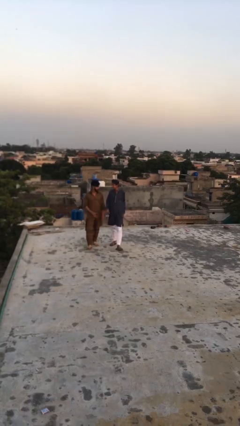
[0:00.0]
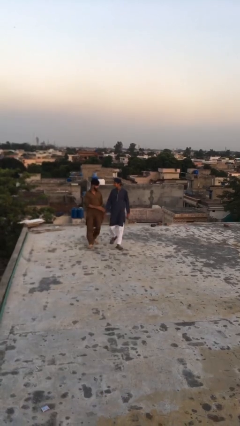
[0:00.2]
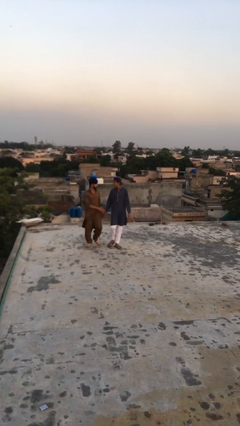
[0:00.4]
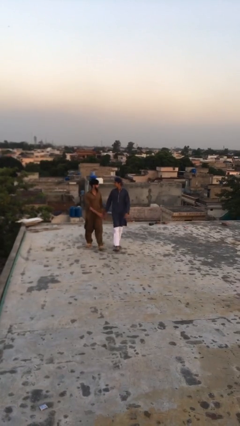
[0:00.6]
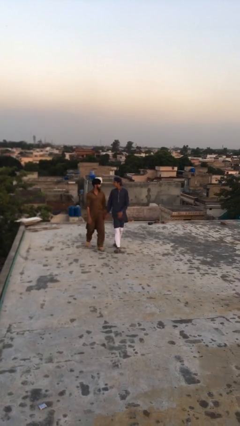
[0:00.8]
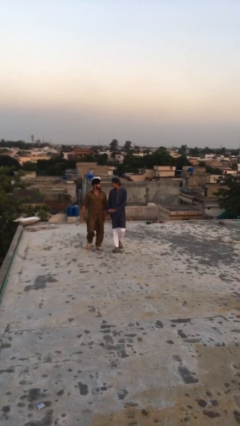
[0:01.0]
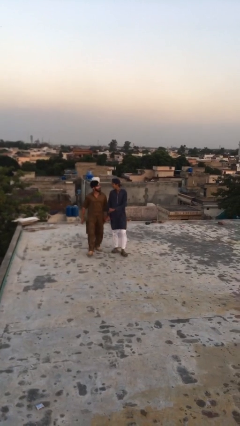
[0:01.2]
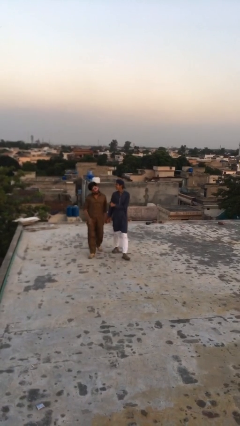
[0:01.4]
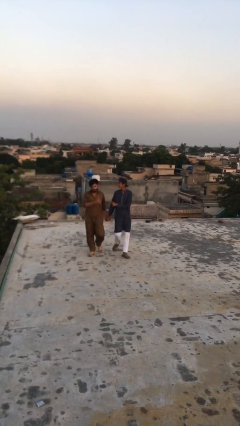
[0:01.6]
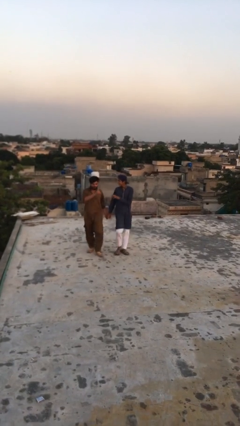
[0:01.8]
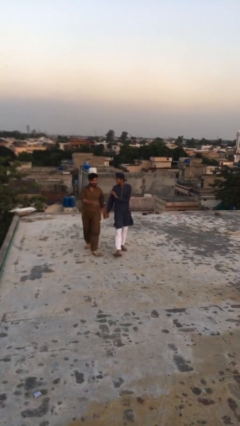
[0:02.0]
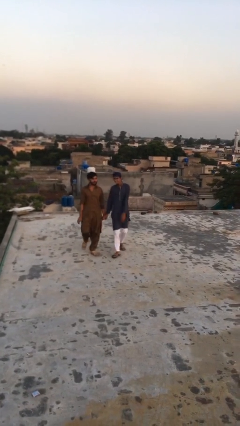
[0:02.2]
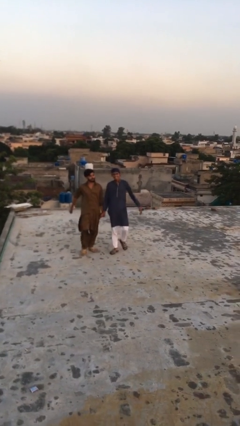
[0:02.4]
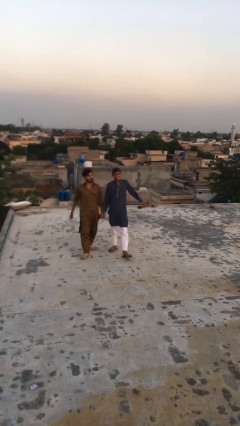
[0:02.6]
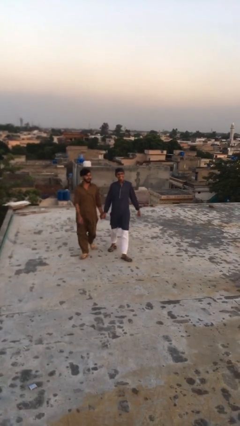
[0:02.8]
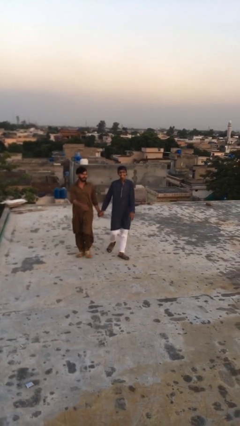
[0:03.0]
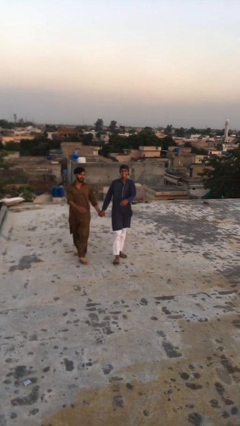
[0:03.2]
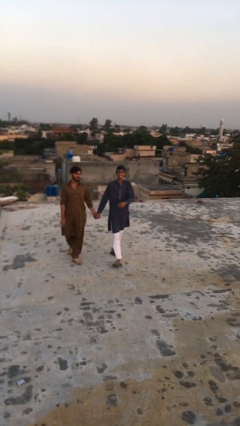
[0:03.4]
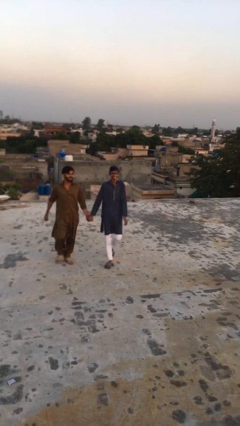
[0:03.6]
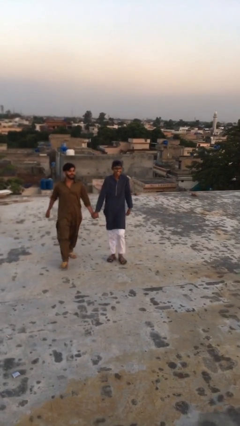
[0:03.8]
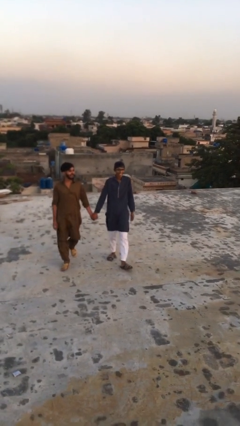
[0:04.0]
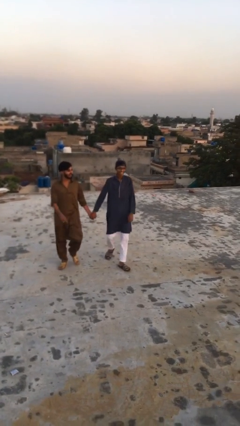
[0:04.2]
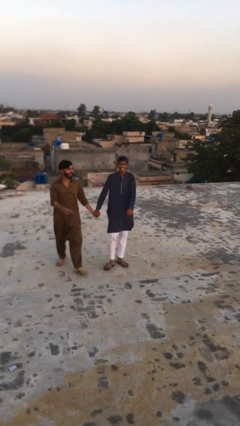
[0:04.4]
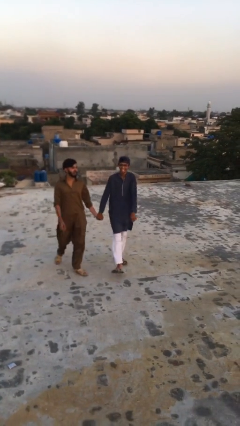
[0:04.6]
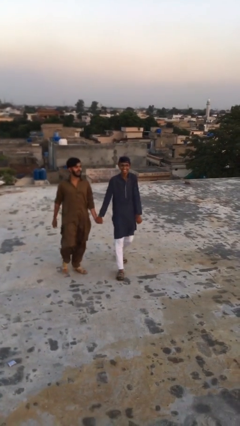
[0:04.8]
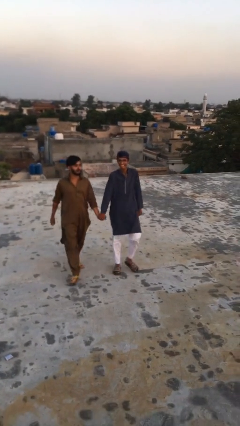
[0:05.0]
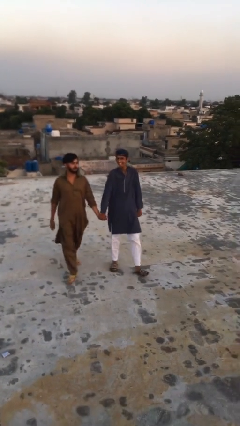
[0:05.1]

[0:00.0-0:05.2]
person holds hand

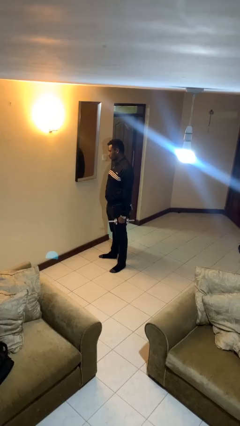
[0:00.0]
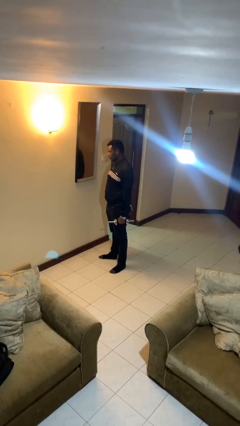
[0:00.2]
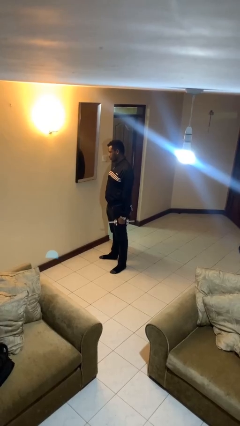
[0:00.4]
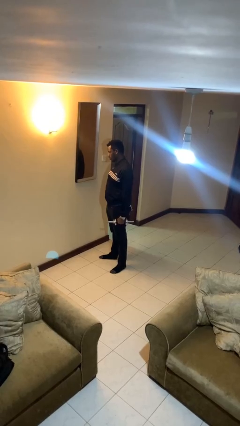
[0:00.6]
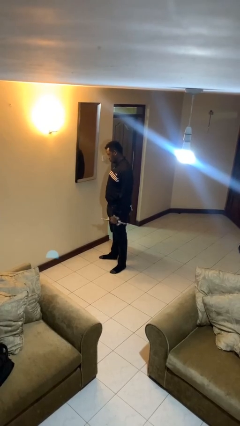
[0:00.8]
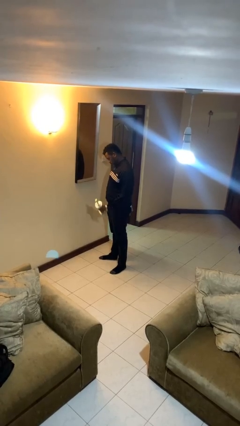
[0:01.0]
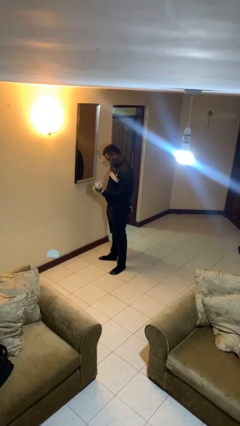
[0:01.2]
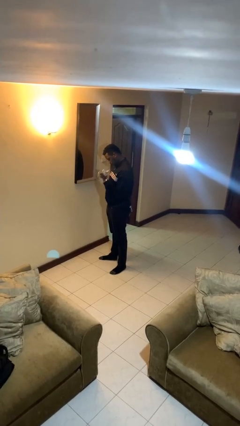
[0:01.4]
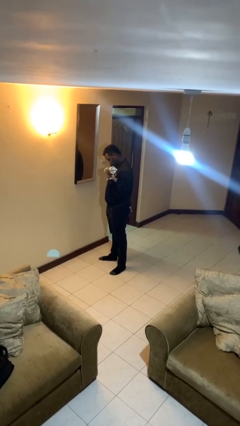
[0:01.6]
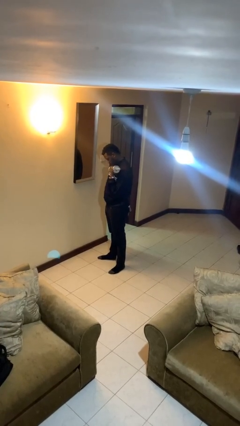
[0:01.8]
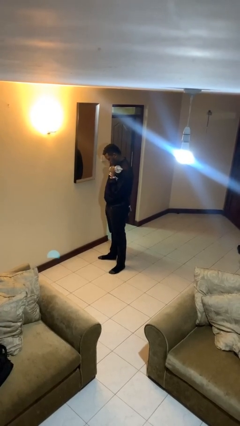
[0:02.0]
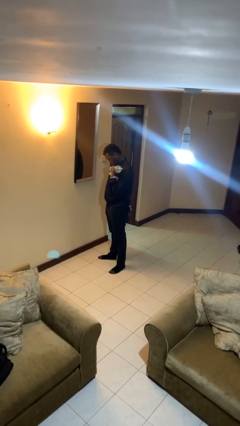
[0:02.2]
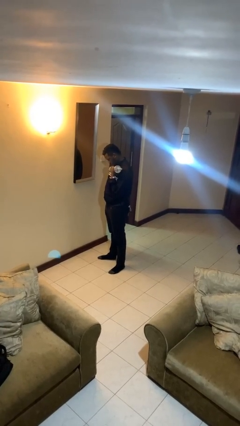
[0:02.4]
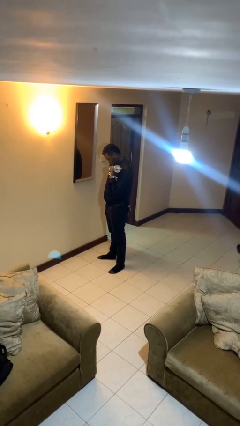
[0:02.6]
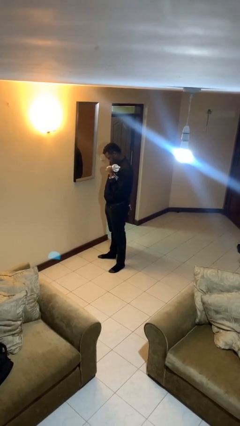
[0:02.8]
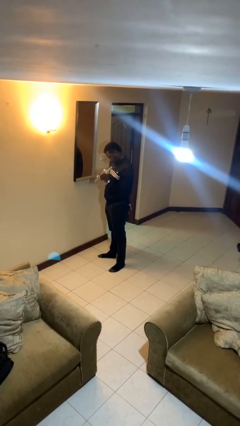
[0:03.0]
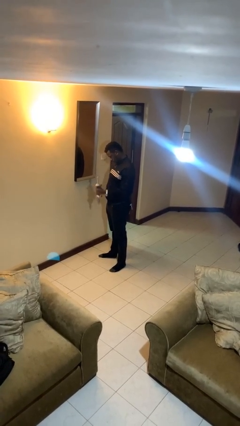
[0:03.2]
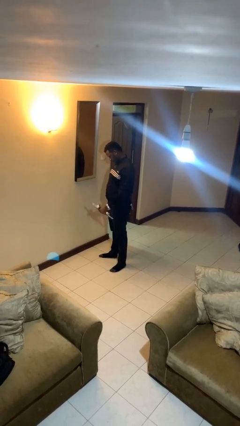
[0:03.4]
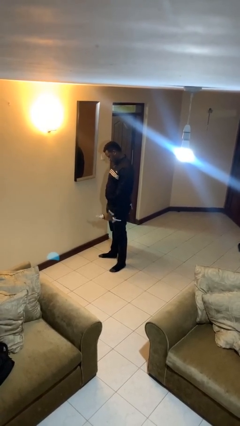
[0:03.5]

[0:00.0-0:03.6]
person lifts dumbbells

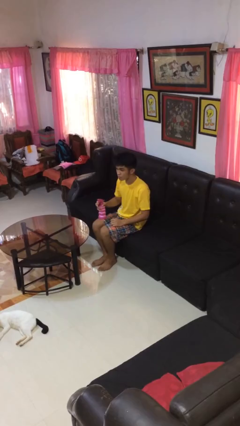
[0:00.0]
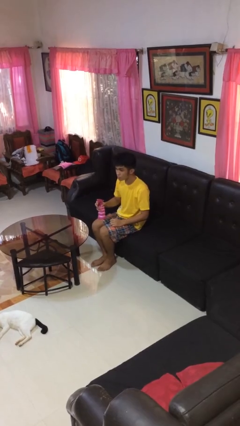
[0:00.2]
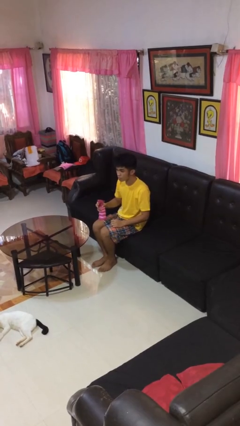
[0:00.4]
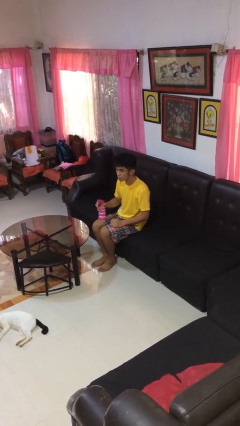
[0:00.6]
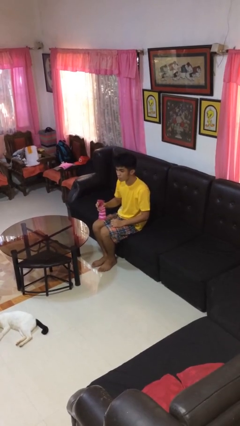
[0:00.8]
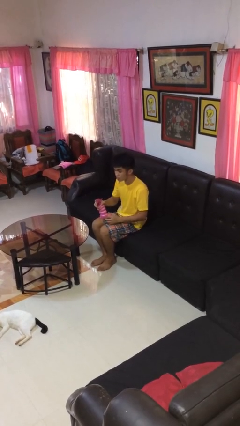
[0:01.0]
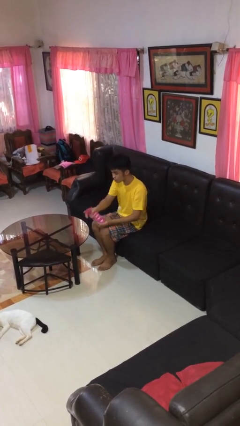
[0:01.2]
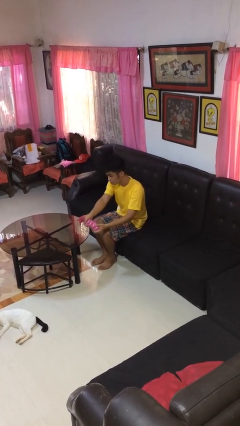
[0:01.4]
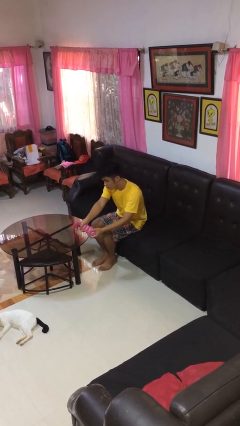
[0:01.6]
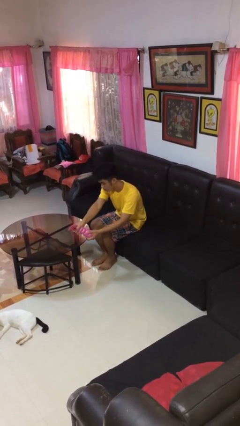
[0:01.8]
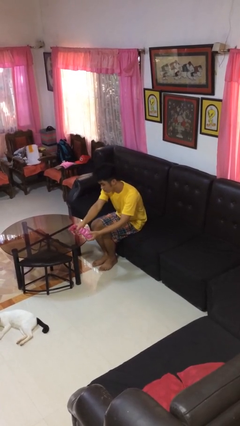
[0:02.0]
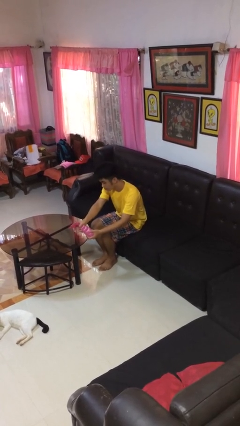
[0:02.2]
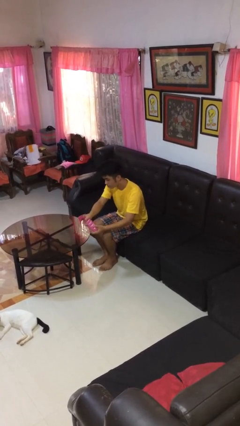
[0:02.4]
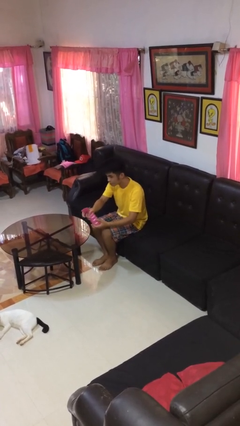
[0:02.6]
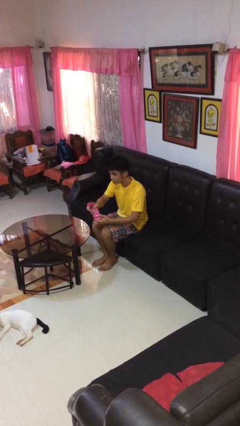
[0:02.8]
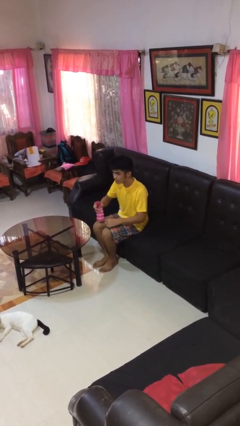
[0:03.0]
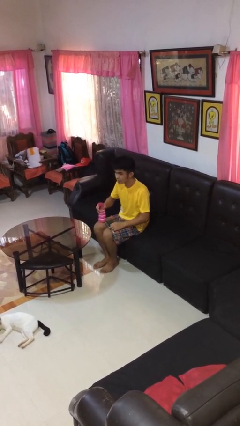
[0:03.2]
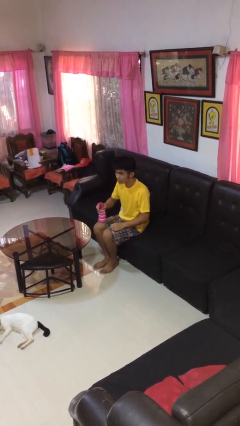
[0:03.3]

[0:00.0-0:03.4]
person sprays from bottle

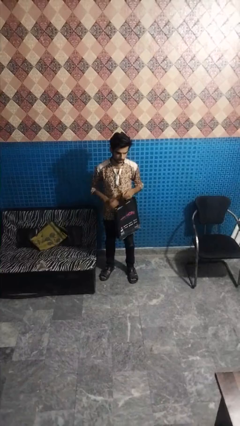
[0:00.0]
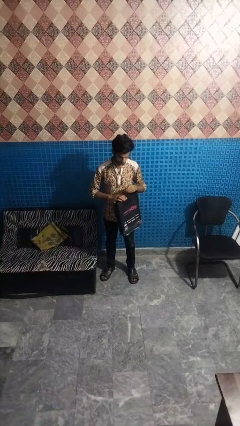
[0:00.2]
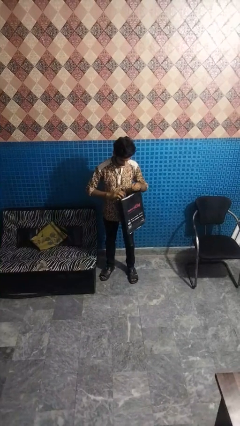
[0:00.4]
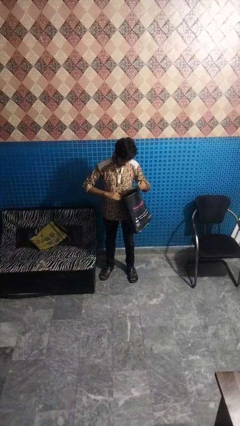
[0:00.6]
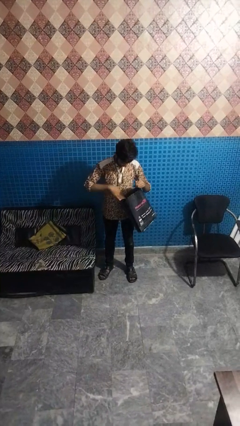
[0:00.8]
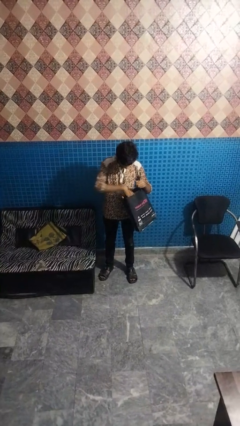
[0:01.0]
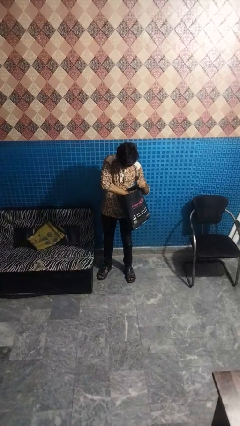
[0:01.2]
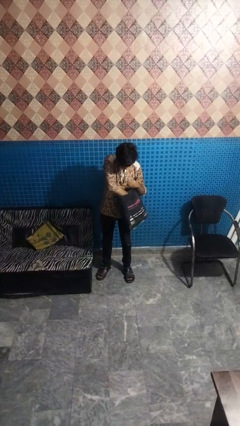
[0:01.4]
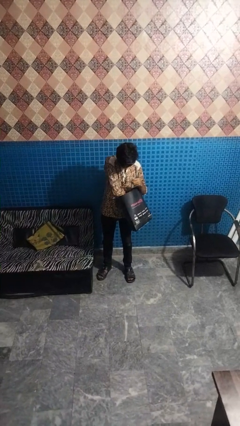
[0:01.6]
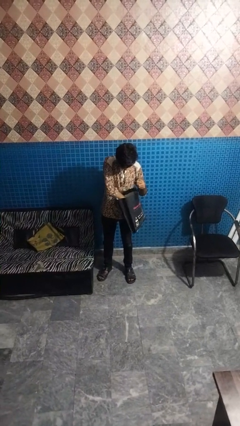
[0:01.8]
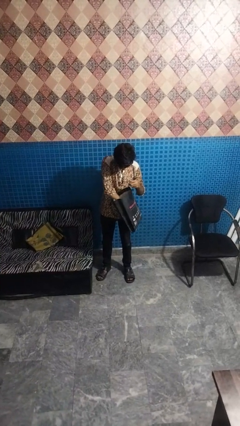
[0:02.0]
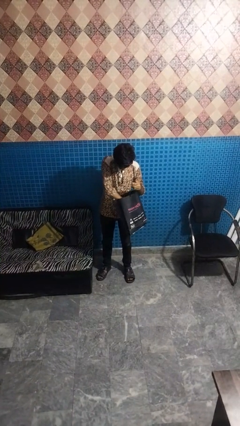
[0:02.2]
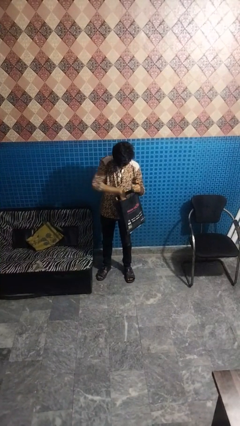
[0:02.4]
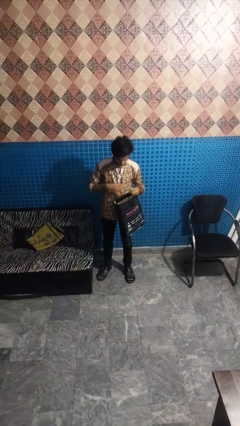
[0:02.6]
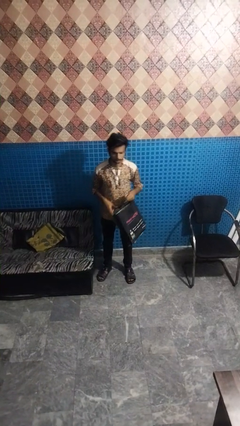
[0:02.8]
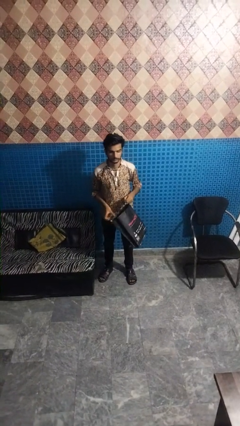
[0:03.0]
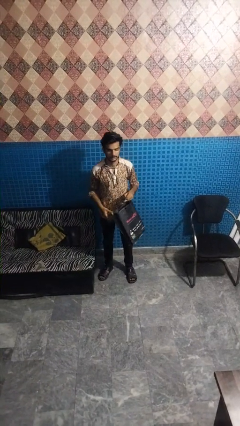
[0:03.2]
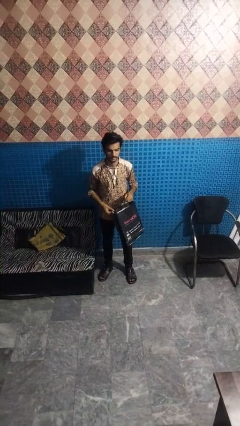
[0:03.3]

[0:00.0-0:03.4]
person searches in bag

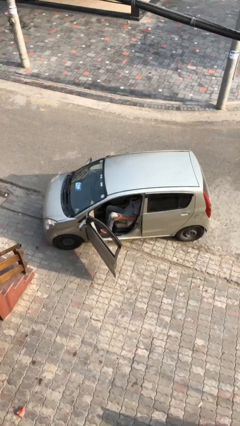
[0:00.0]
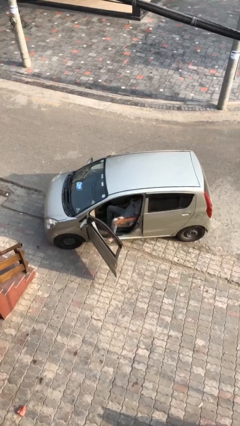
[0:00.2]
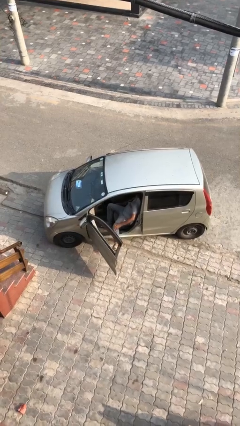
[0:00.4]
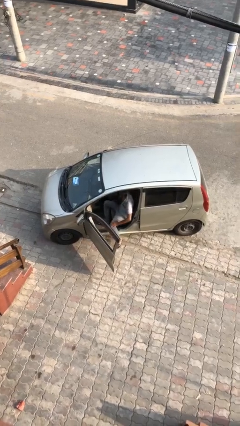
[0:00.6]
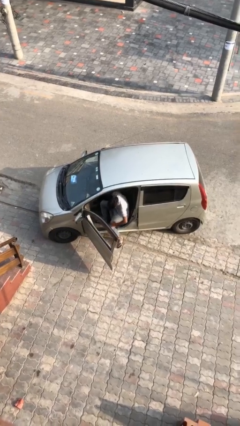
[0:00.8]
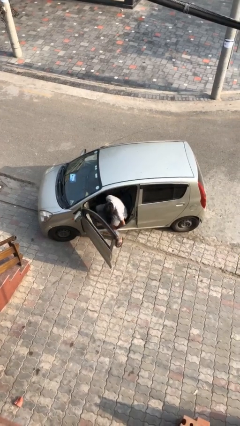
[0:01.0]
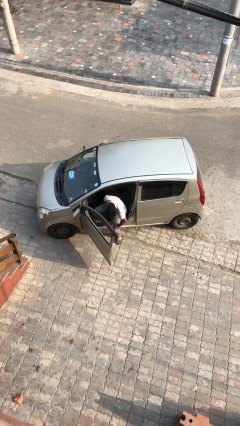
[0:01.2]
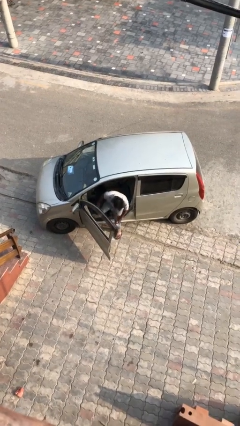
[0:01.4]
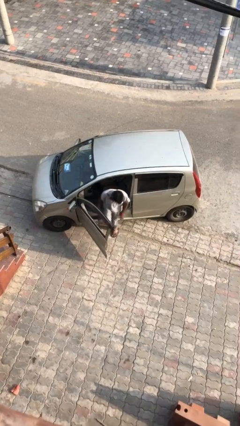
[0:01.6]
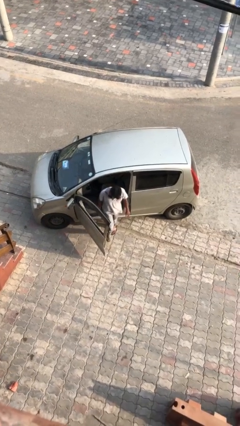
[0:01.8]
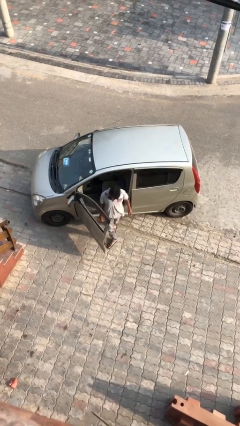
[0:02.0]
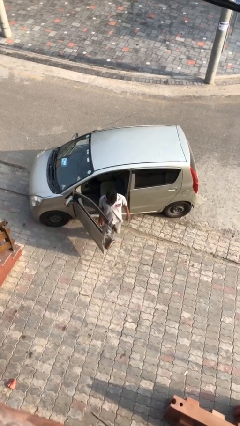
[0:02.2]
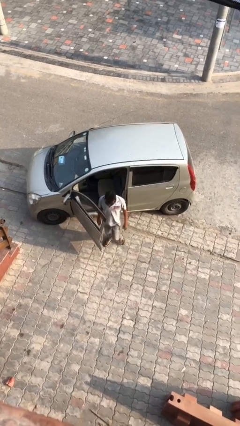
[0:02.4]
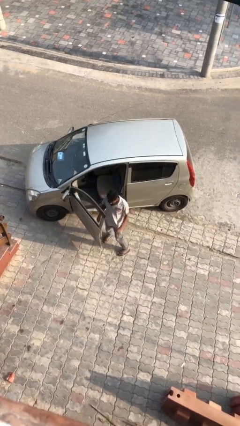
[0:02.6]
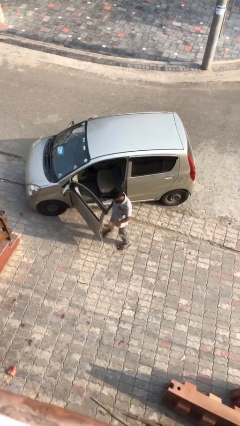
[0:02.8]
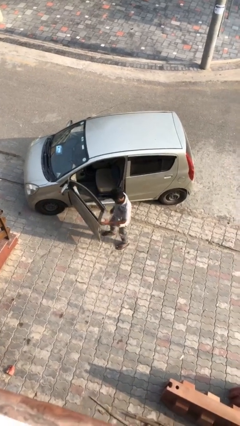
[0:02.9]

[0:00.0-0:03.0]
person exits car
